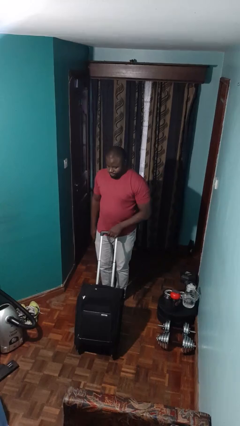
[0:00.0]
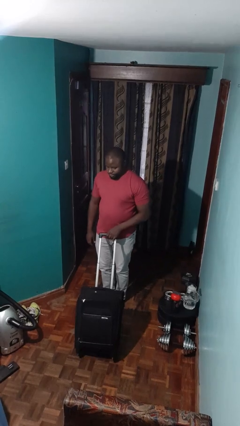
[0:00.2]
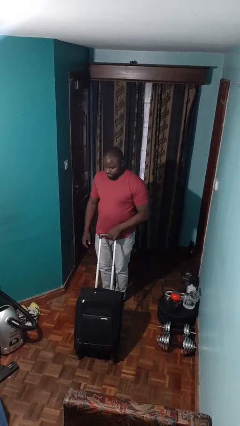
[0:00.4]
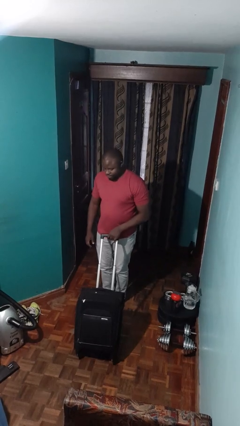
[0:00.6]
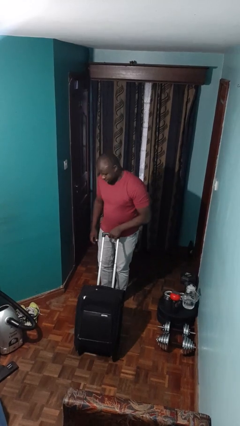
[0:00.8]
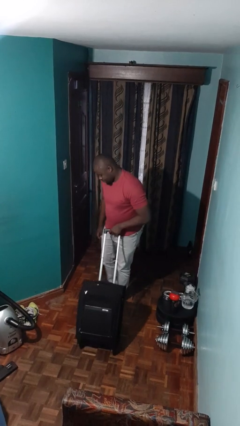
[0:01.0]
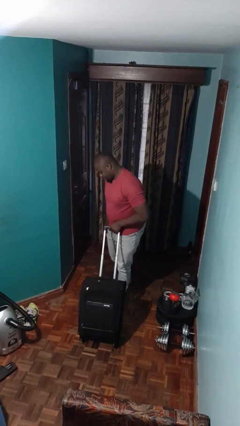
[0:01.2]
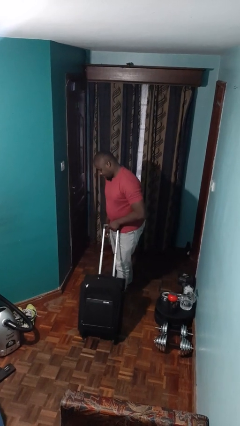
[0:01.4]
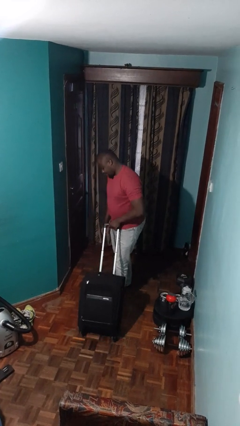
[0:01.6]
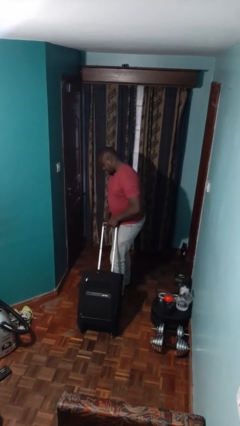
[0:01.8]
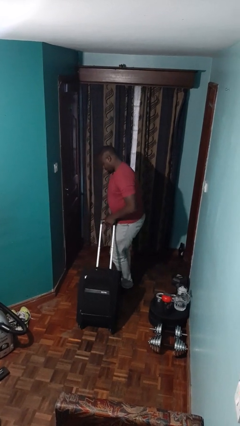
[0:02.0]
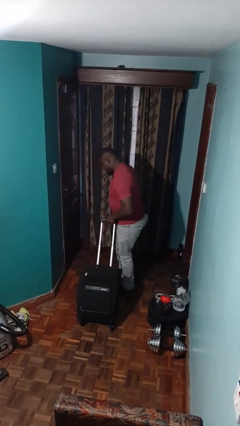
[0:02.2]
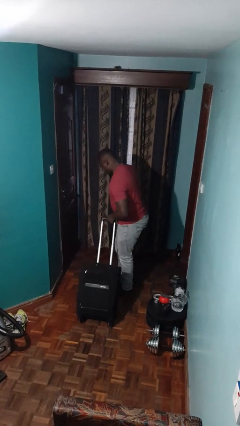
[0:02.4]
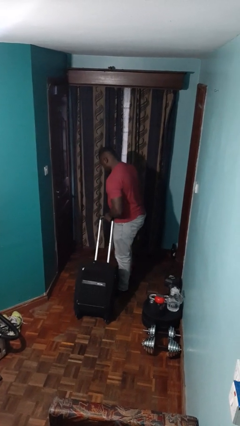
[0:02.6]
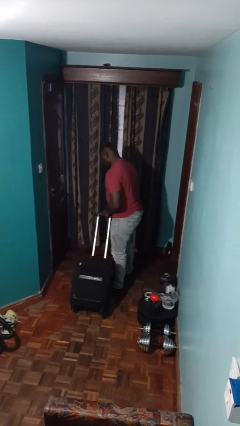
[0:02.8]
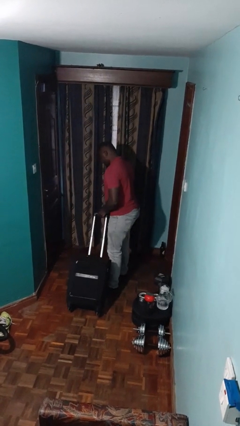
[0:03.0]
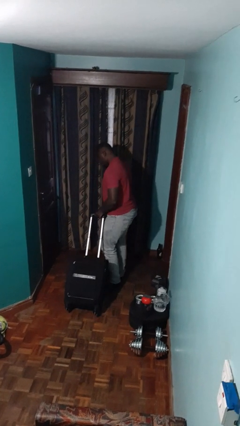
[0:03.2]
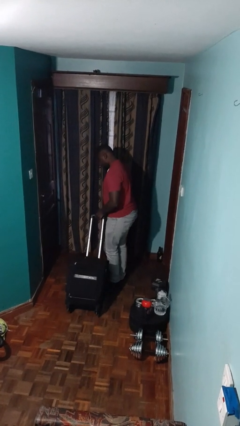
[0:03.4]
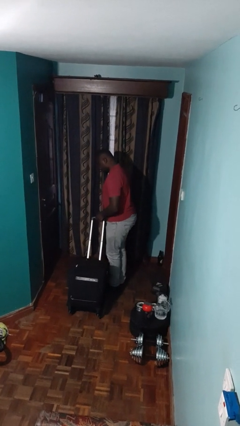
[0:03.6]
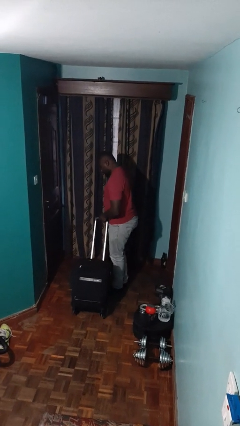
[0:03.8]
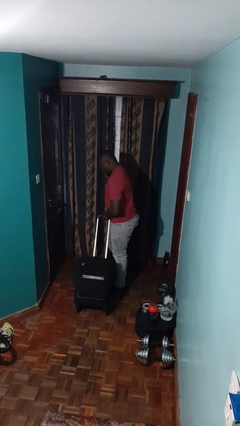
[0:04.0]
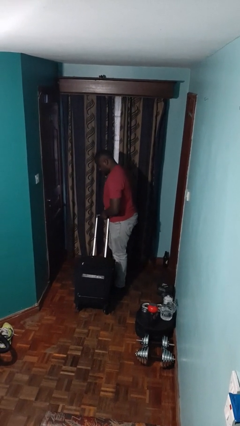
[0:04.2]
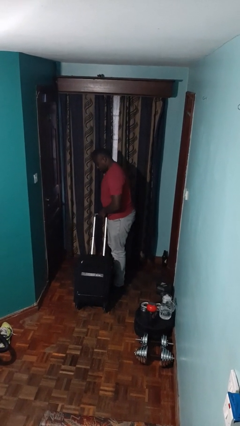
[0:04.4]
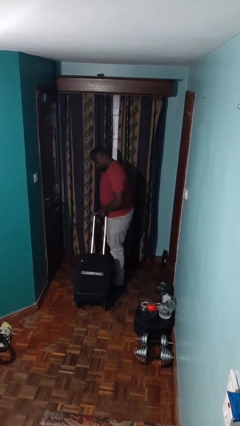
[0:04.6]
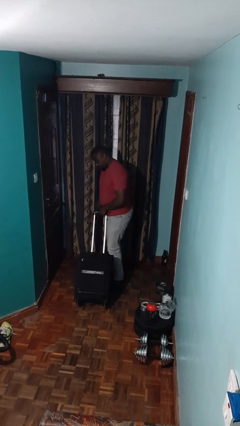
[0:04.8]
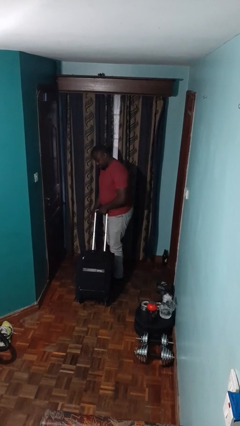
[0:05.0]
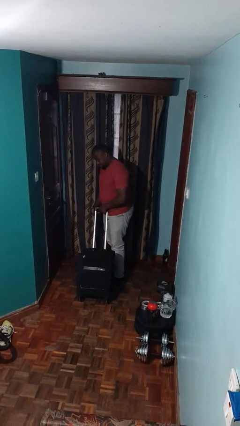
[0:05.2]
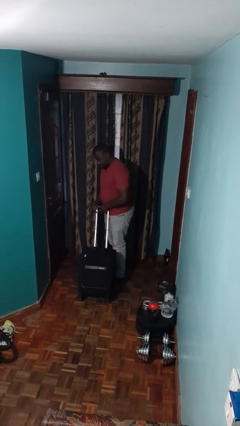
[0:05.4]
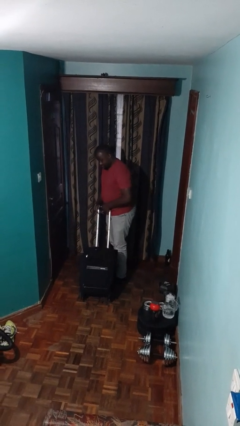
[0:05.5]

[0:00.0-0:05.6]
person pulls wheeled cart

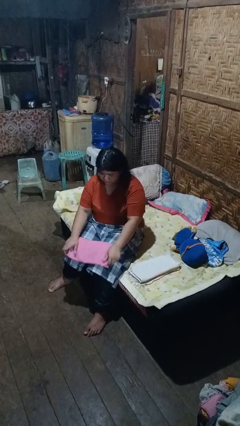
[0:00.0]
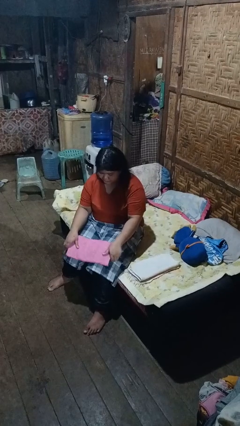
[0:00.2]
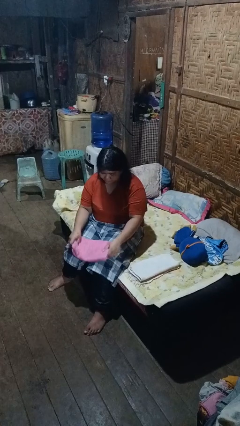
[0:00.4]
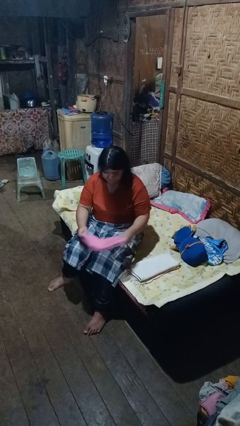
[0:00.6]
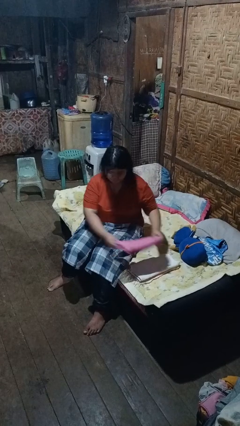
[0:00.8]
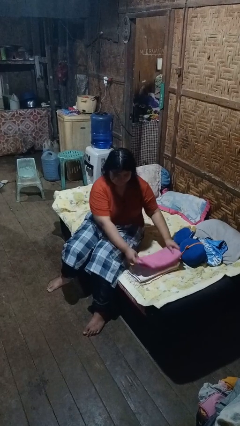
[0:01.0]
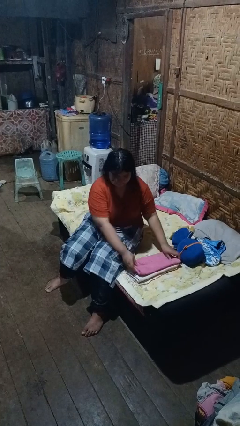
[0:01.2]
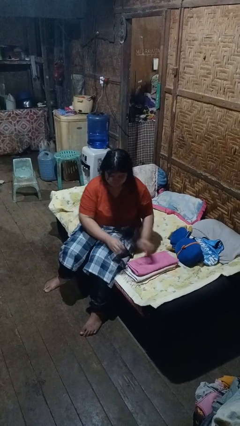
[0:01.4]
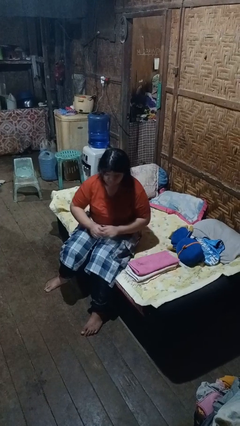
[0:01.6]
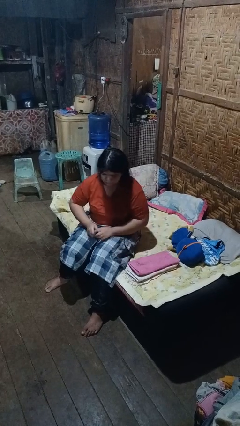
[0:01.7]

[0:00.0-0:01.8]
person folds towel

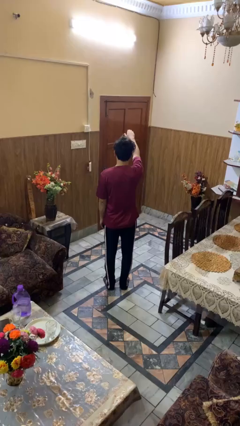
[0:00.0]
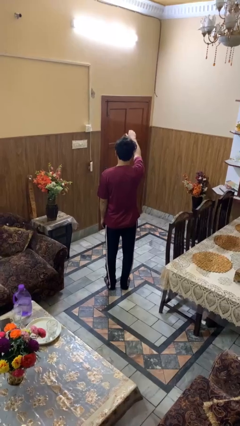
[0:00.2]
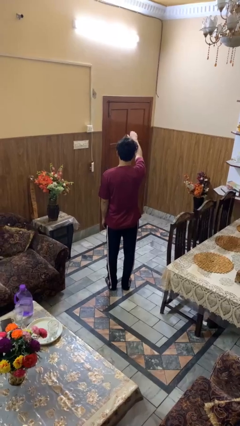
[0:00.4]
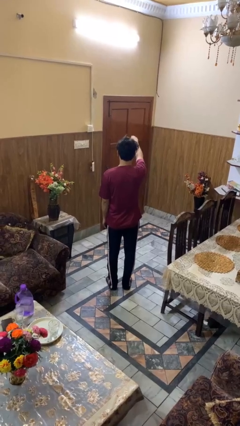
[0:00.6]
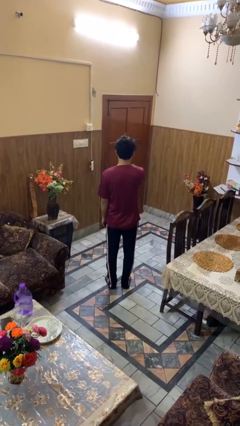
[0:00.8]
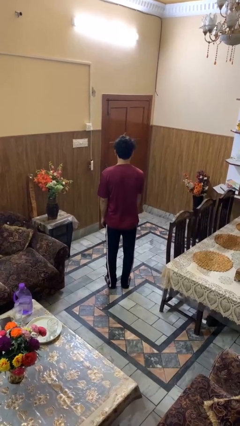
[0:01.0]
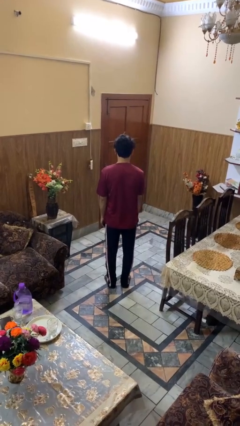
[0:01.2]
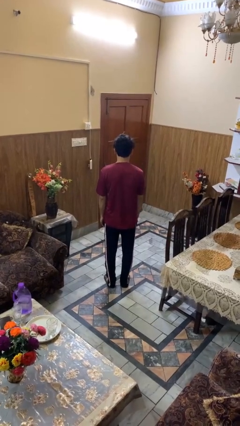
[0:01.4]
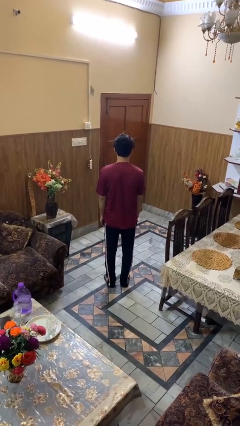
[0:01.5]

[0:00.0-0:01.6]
person gestures swipe down

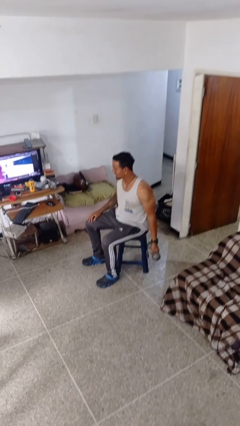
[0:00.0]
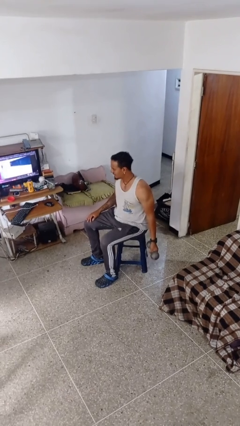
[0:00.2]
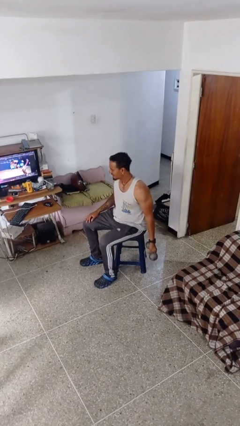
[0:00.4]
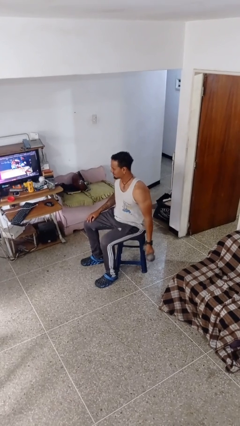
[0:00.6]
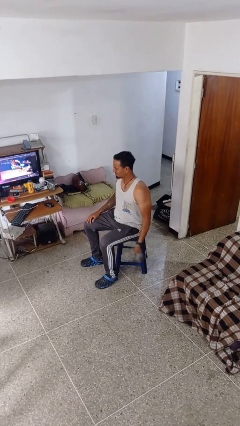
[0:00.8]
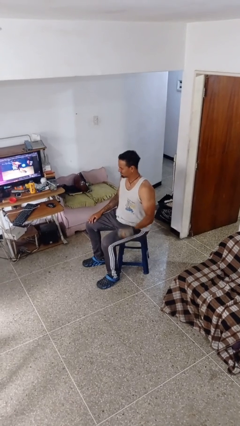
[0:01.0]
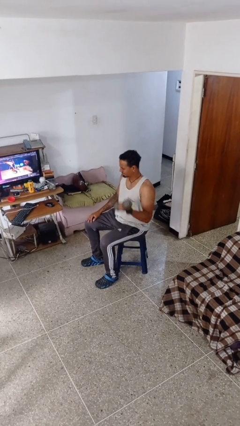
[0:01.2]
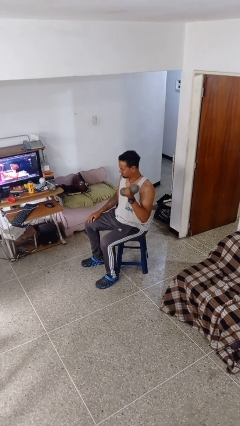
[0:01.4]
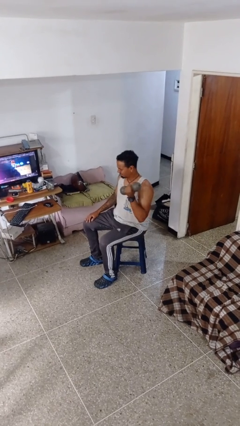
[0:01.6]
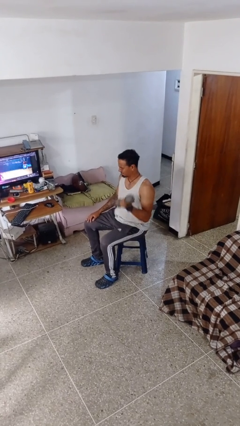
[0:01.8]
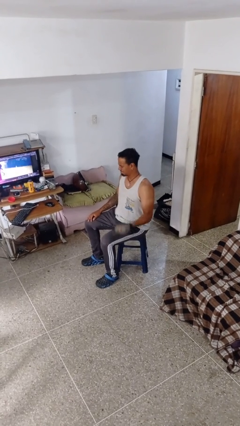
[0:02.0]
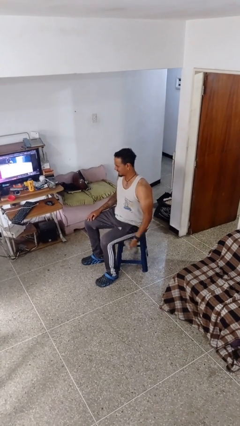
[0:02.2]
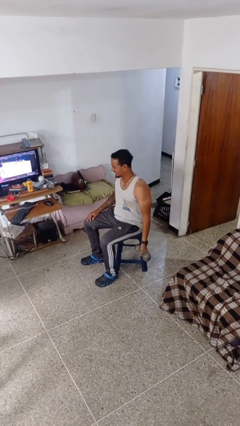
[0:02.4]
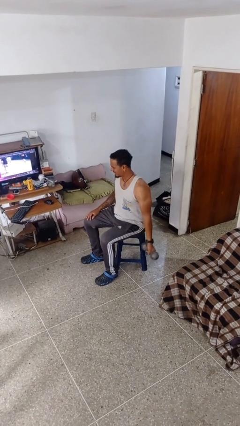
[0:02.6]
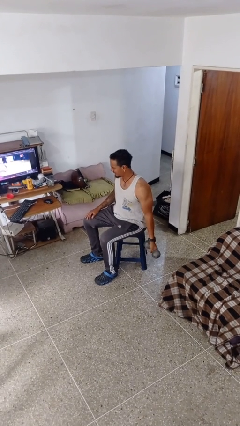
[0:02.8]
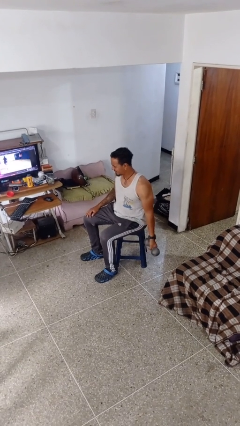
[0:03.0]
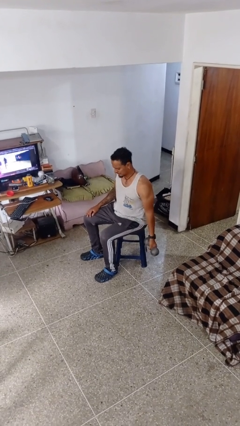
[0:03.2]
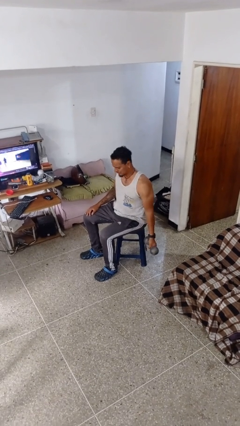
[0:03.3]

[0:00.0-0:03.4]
person lifts dumbbells

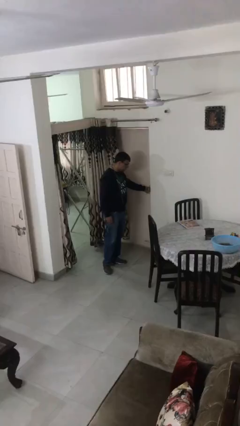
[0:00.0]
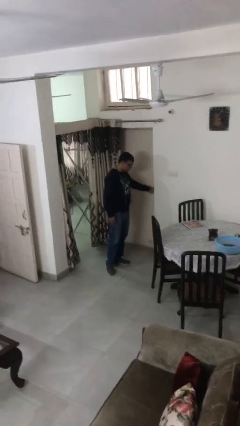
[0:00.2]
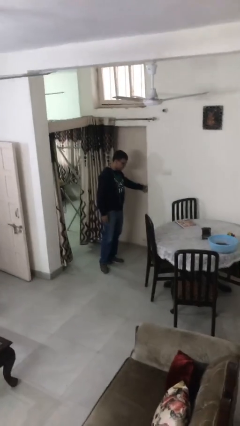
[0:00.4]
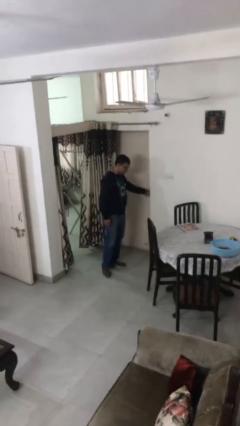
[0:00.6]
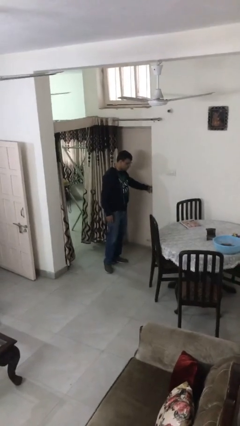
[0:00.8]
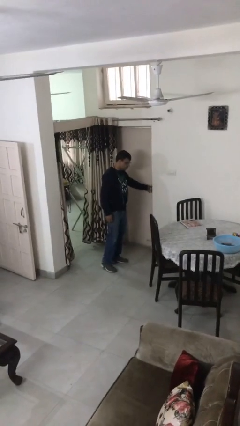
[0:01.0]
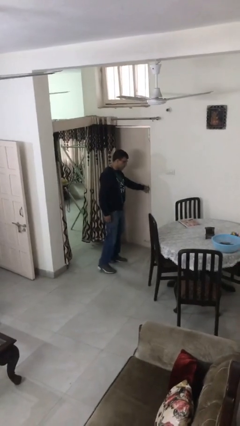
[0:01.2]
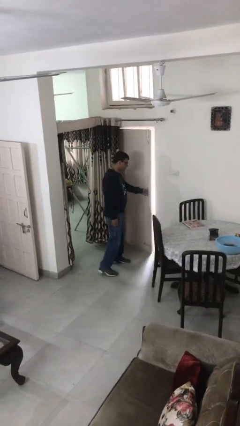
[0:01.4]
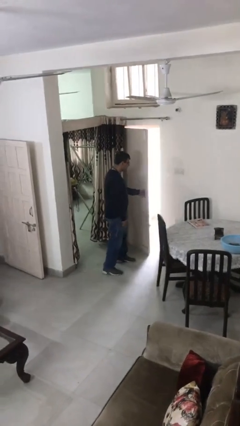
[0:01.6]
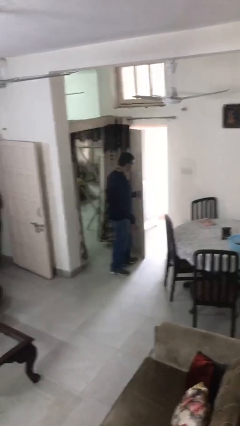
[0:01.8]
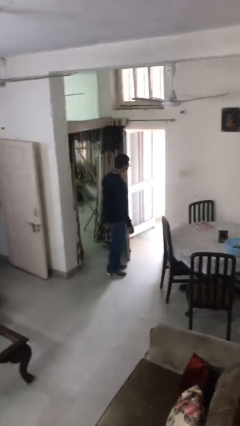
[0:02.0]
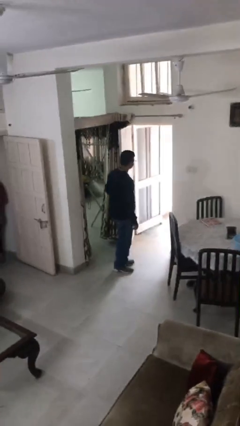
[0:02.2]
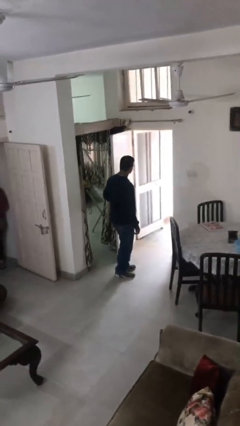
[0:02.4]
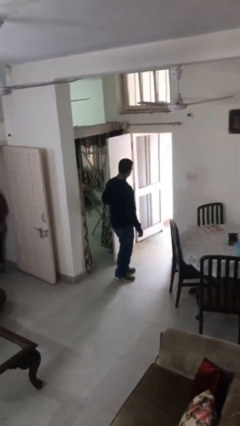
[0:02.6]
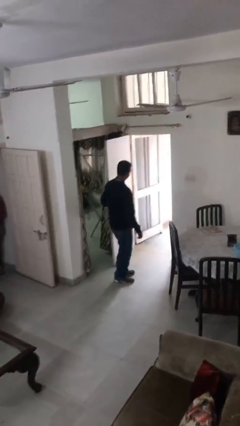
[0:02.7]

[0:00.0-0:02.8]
person opens facility door

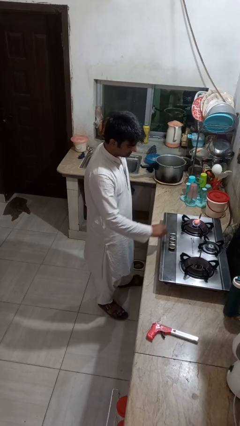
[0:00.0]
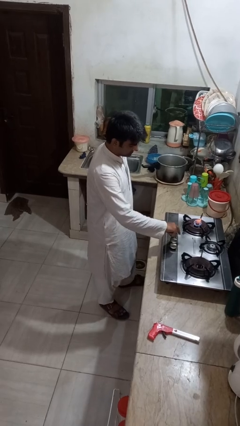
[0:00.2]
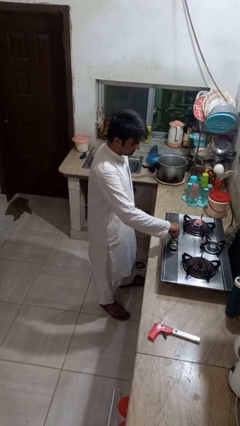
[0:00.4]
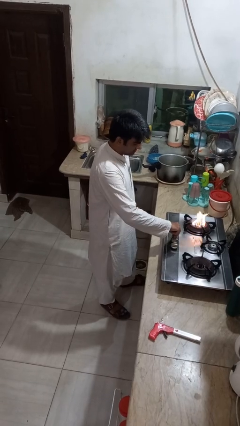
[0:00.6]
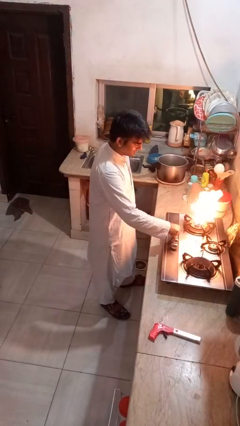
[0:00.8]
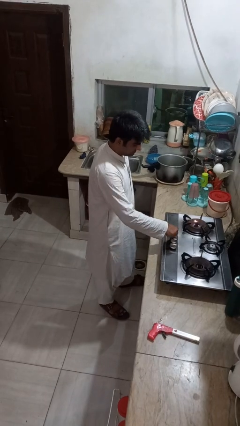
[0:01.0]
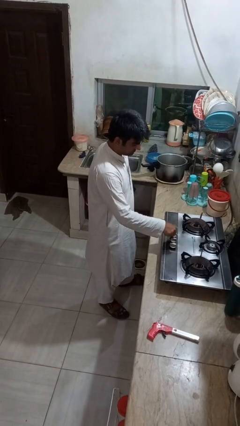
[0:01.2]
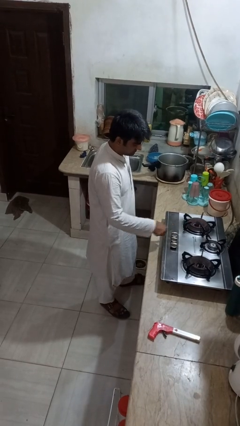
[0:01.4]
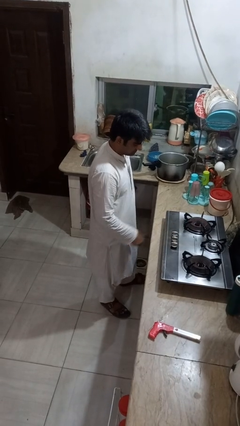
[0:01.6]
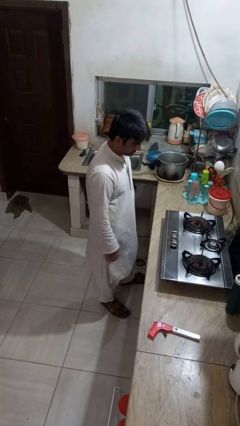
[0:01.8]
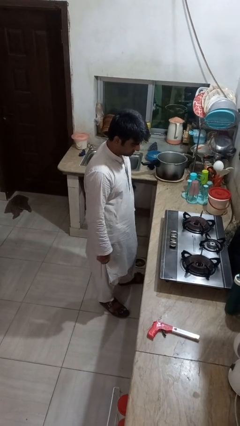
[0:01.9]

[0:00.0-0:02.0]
person turns off stovetop

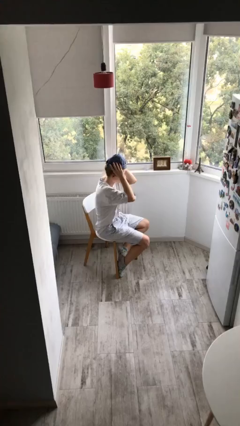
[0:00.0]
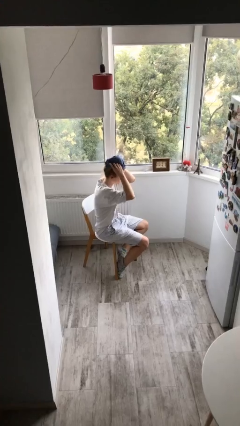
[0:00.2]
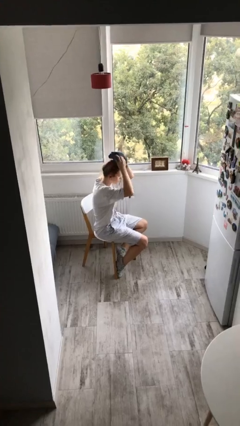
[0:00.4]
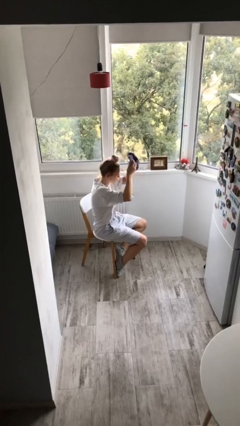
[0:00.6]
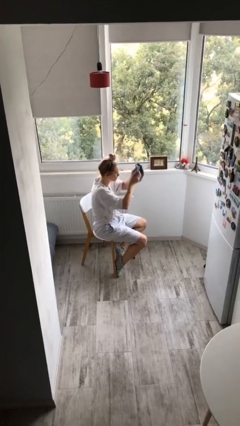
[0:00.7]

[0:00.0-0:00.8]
person takes off hat
